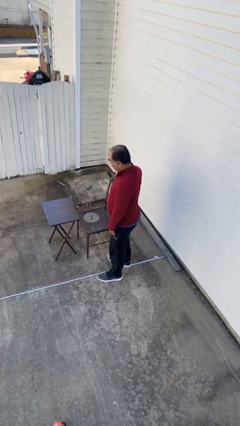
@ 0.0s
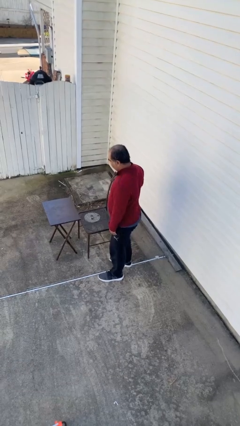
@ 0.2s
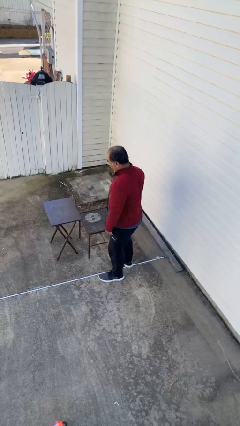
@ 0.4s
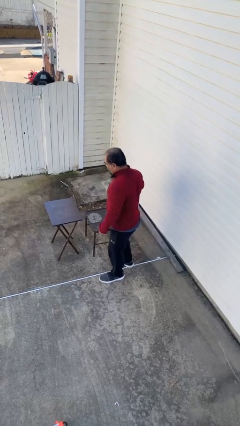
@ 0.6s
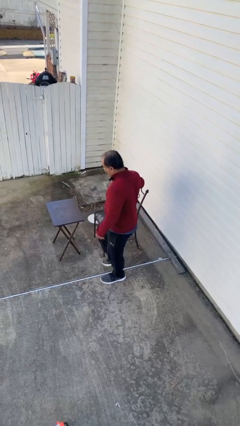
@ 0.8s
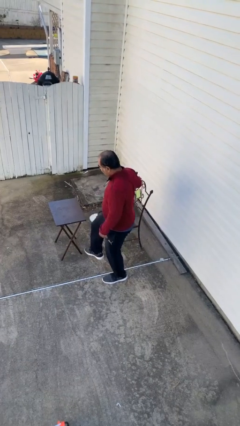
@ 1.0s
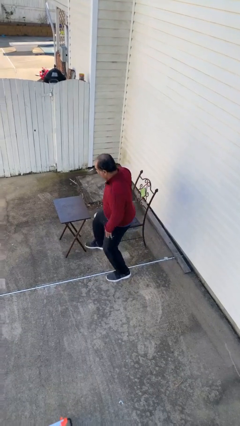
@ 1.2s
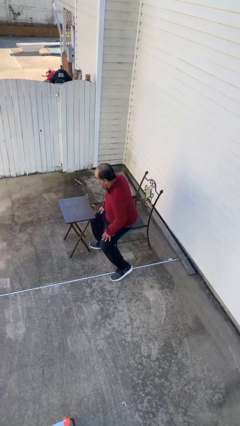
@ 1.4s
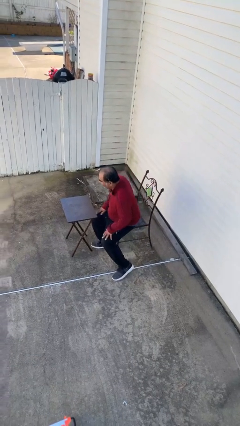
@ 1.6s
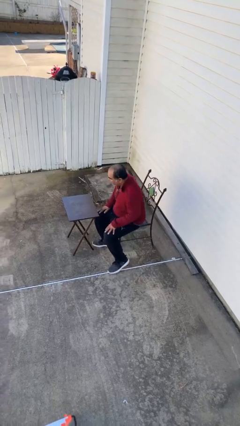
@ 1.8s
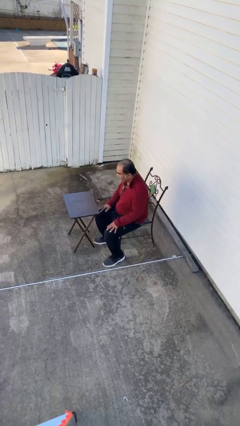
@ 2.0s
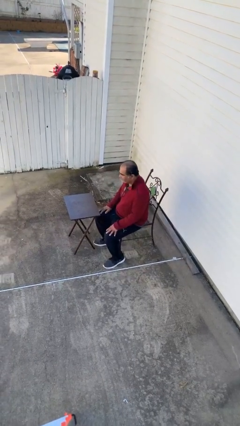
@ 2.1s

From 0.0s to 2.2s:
person sits down

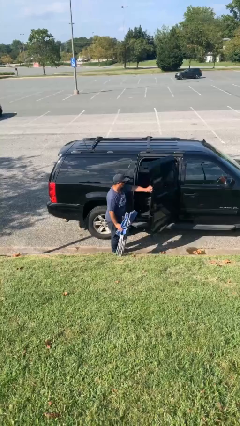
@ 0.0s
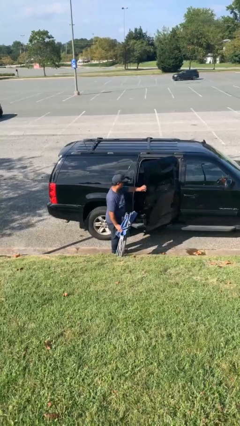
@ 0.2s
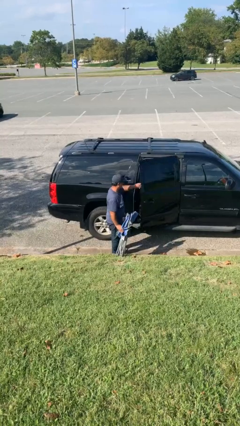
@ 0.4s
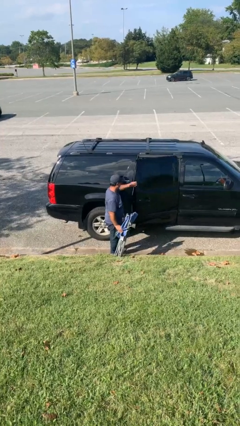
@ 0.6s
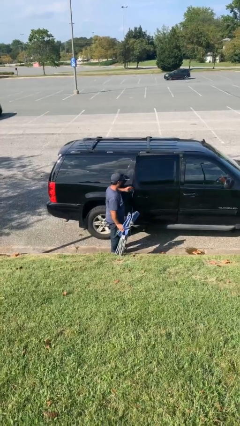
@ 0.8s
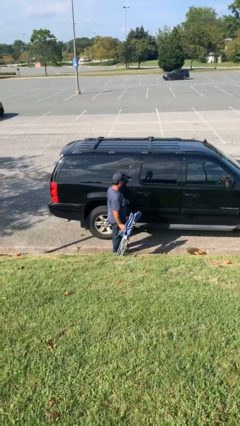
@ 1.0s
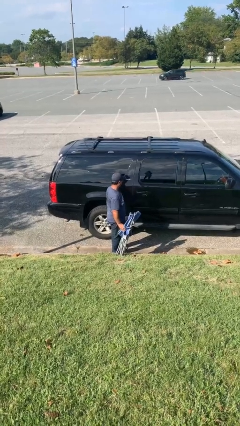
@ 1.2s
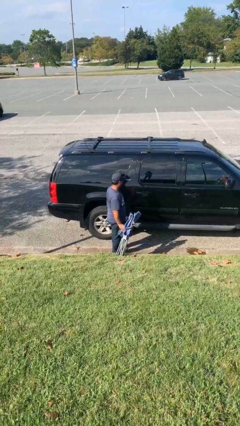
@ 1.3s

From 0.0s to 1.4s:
person closes car door

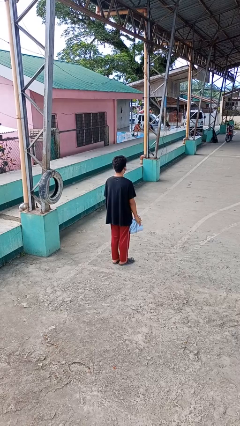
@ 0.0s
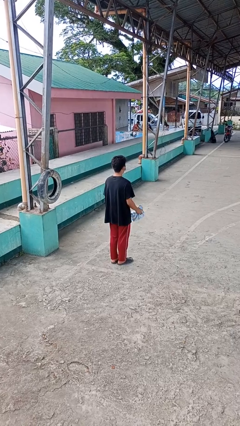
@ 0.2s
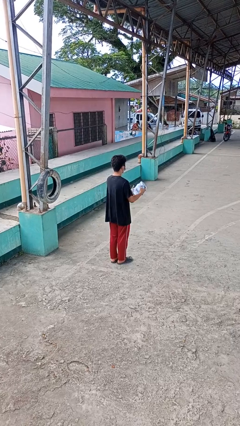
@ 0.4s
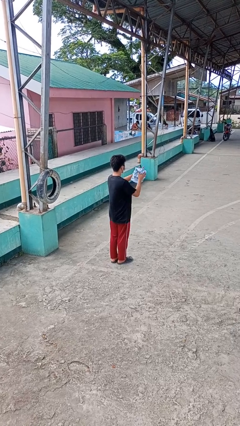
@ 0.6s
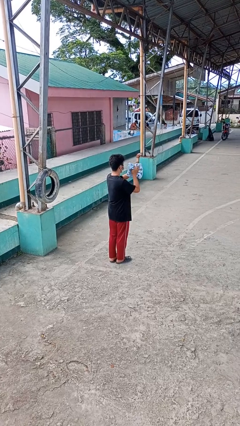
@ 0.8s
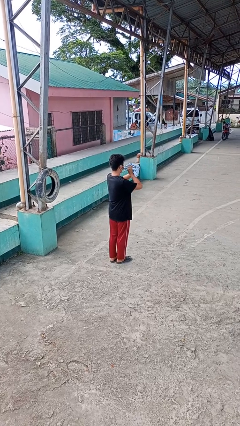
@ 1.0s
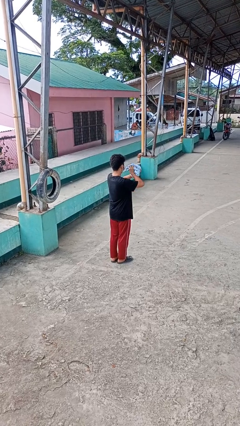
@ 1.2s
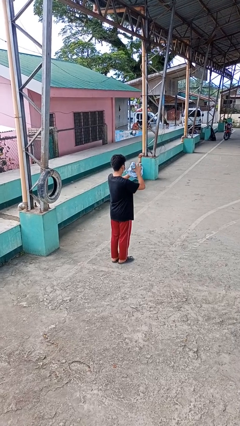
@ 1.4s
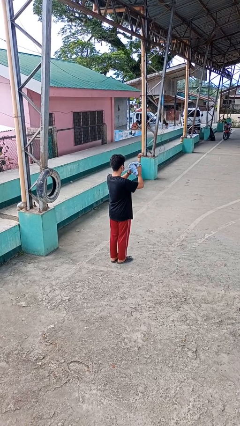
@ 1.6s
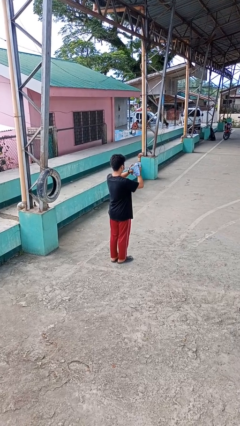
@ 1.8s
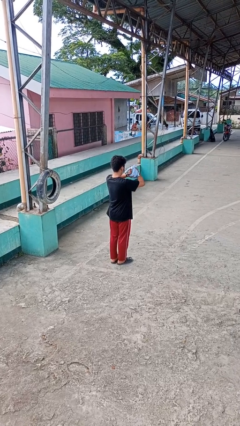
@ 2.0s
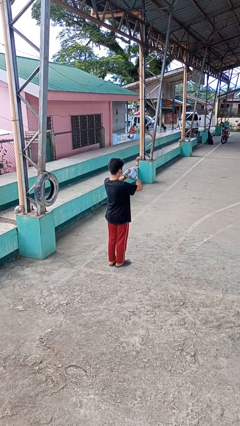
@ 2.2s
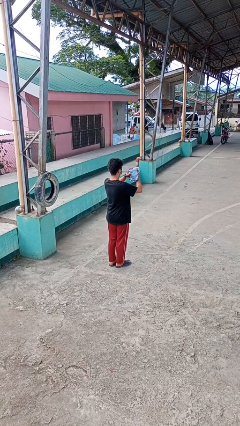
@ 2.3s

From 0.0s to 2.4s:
person squeezes object

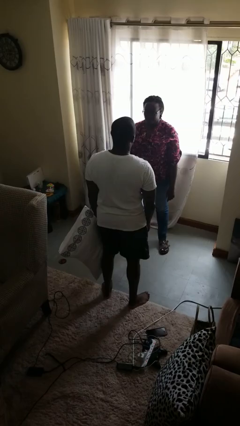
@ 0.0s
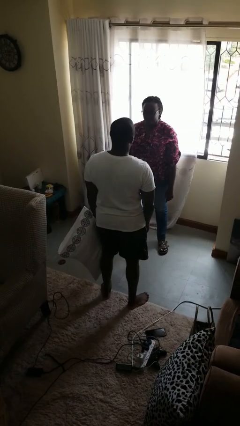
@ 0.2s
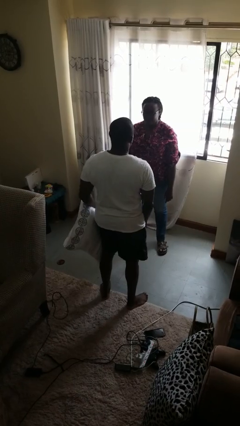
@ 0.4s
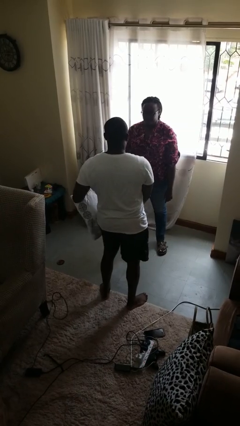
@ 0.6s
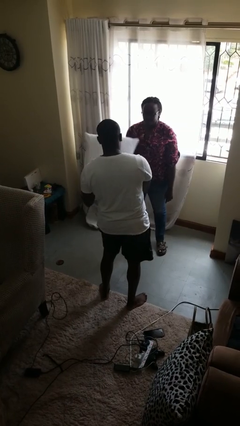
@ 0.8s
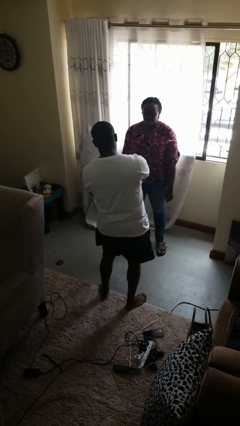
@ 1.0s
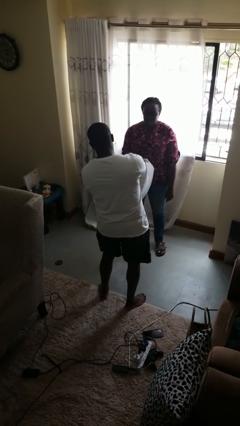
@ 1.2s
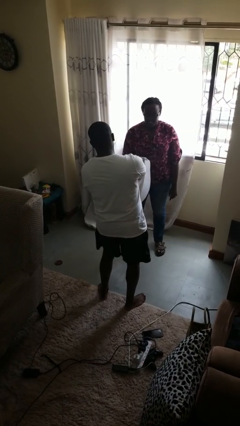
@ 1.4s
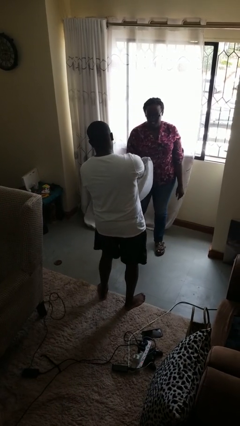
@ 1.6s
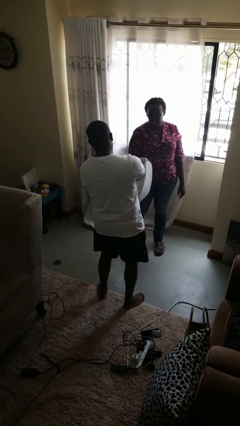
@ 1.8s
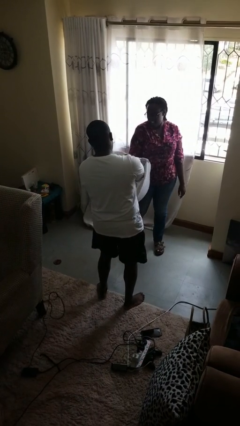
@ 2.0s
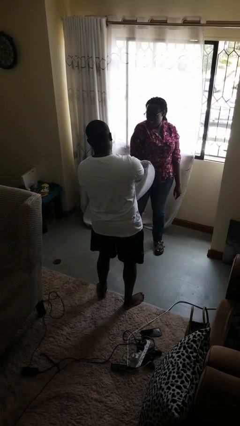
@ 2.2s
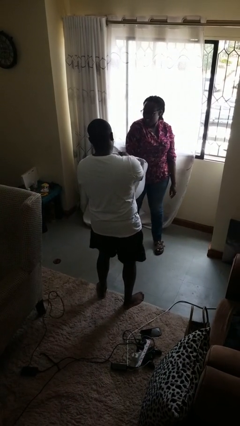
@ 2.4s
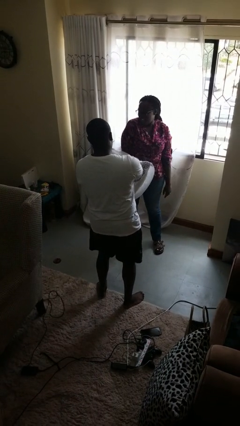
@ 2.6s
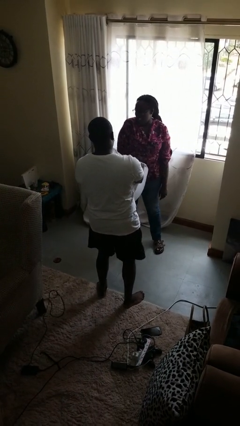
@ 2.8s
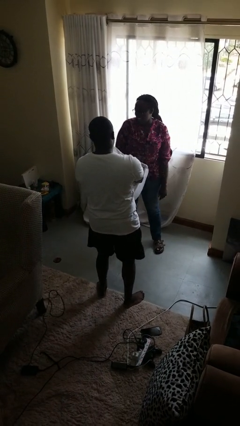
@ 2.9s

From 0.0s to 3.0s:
person hits person with pillow

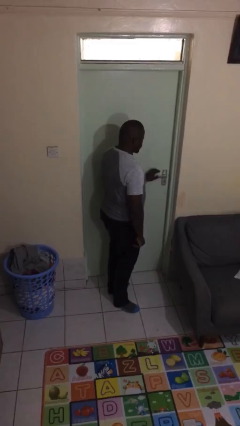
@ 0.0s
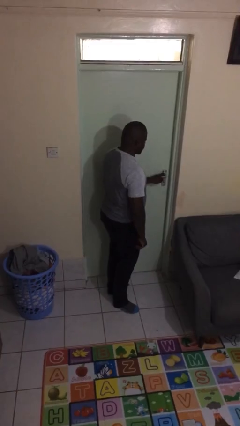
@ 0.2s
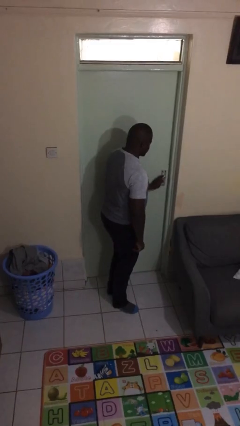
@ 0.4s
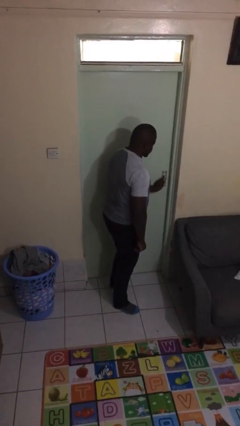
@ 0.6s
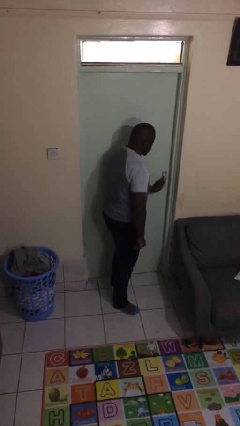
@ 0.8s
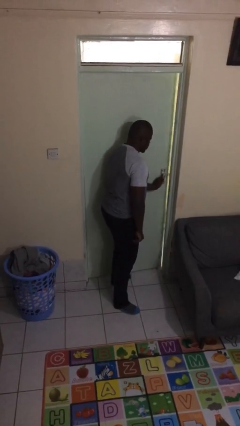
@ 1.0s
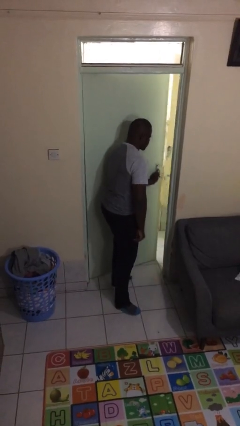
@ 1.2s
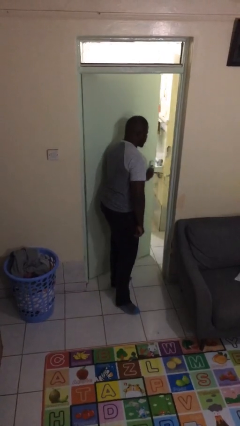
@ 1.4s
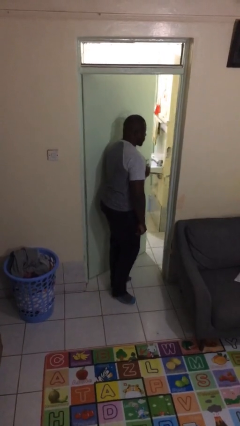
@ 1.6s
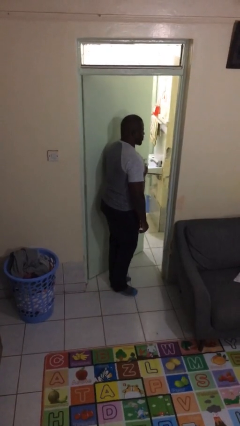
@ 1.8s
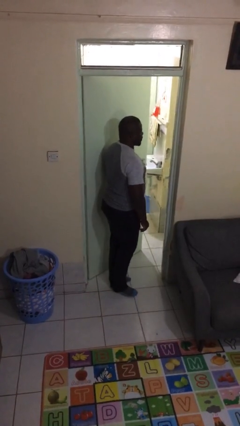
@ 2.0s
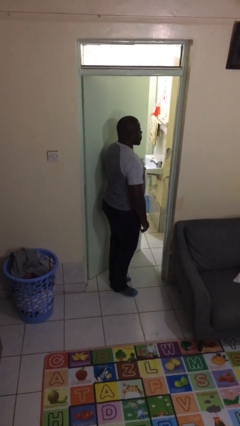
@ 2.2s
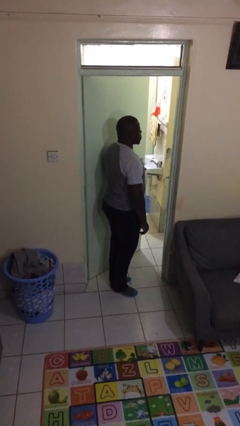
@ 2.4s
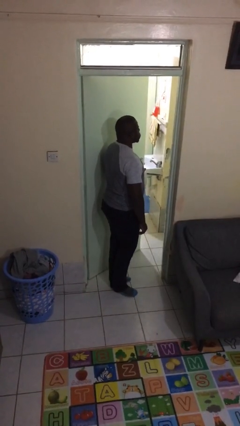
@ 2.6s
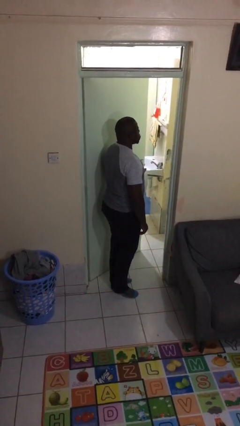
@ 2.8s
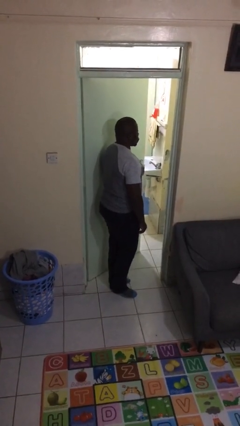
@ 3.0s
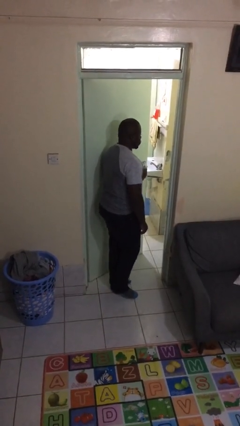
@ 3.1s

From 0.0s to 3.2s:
person opens facility door

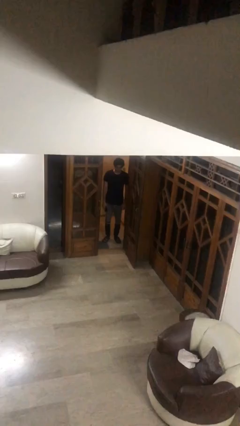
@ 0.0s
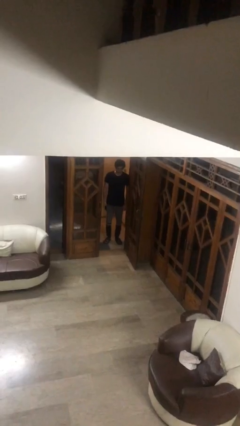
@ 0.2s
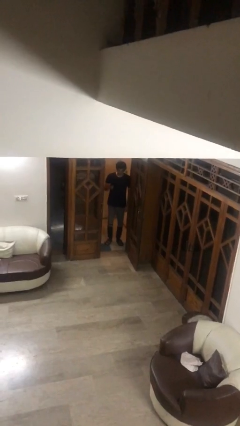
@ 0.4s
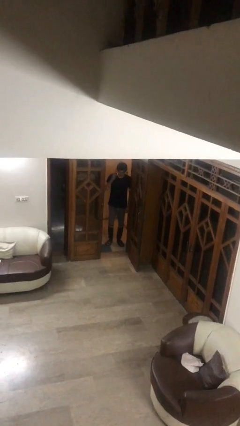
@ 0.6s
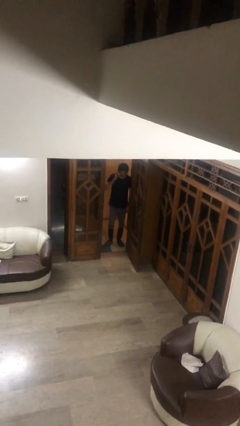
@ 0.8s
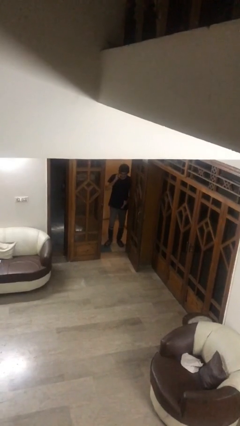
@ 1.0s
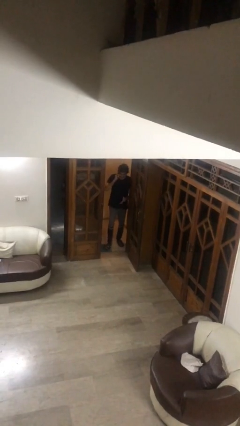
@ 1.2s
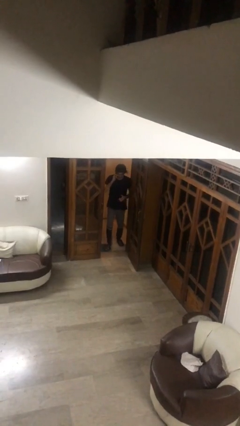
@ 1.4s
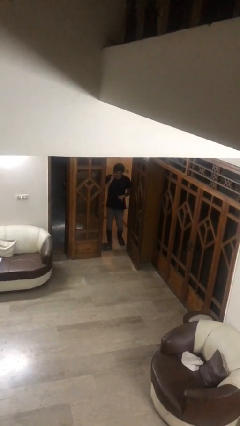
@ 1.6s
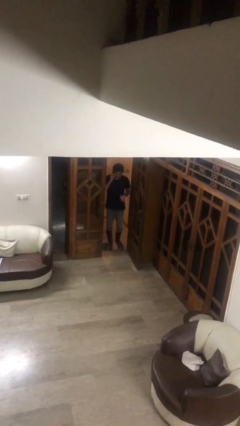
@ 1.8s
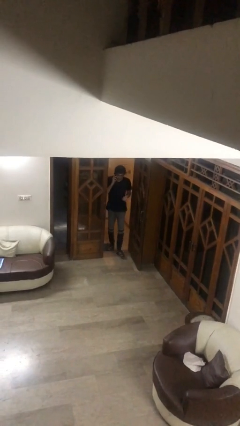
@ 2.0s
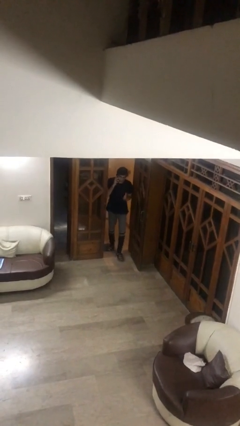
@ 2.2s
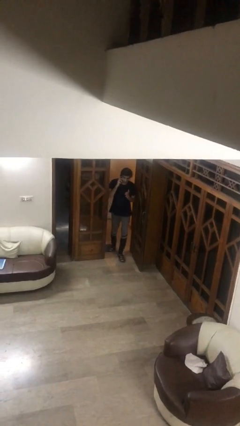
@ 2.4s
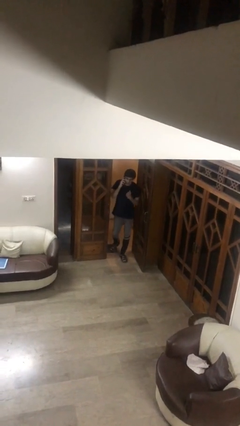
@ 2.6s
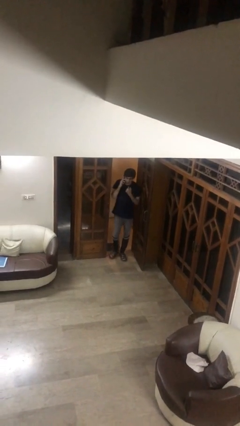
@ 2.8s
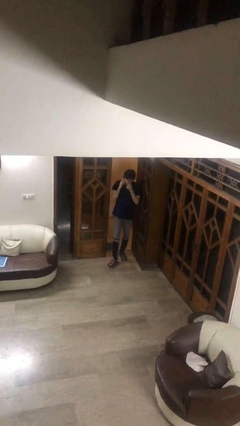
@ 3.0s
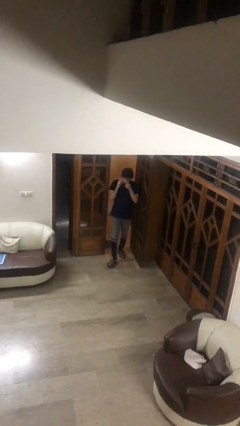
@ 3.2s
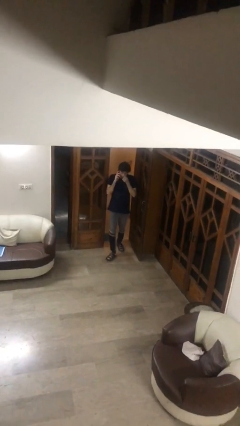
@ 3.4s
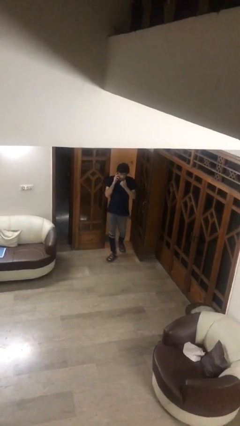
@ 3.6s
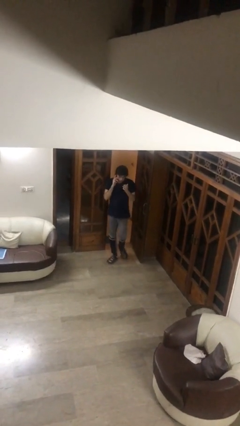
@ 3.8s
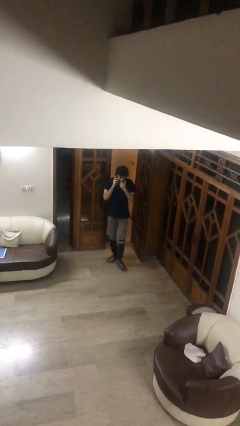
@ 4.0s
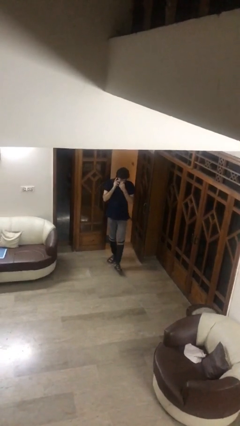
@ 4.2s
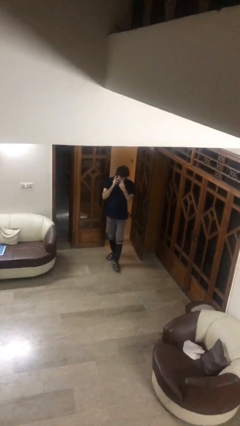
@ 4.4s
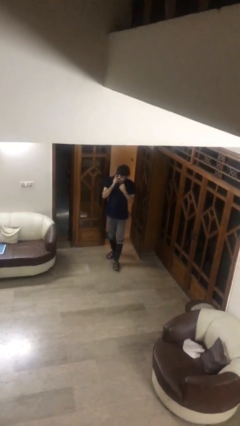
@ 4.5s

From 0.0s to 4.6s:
person enters scene through structure

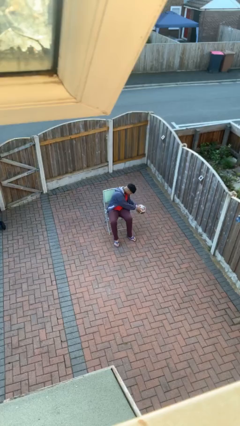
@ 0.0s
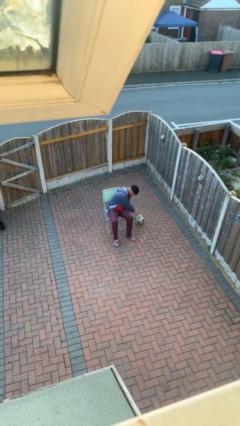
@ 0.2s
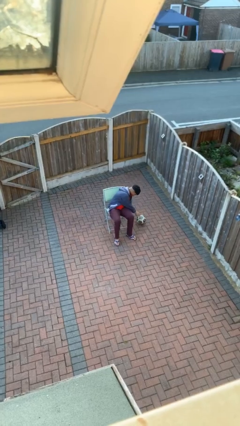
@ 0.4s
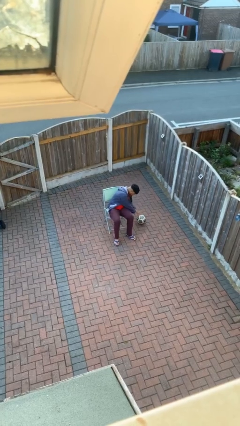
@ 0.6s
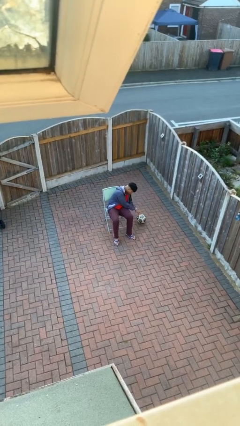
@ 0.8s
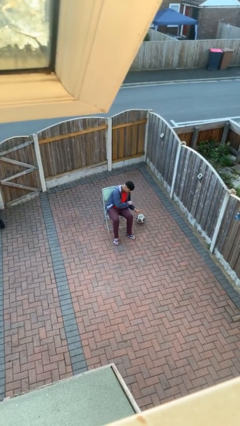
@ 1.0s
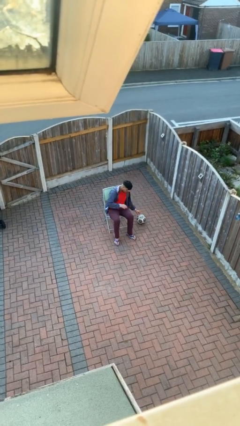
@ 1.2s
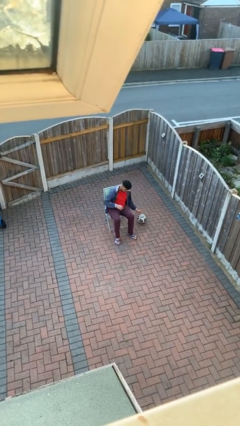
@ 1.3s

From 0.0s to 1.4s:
person puts down object on floor
